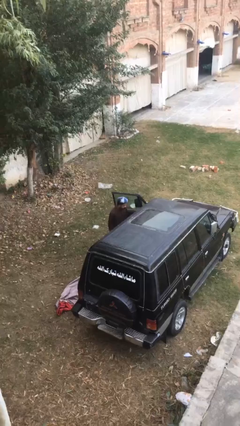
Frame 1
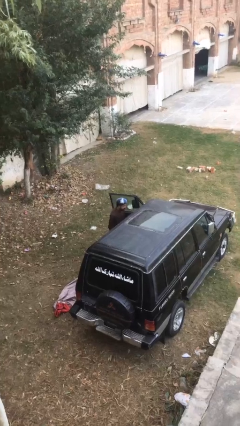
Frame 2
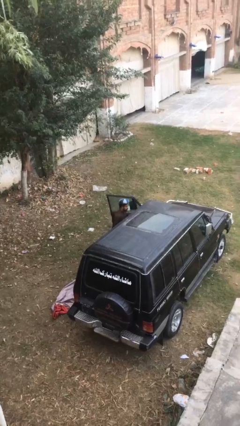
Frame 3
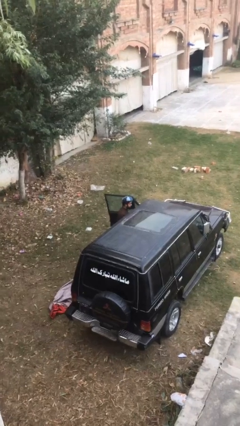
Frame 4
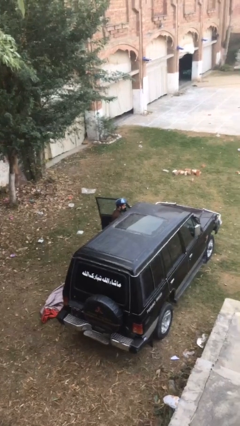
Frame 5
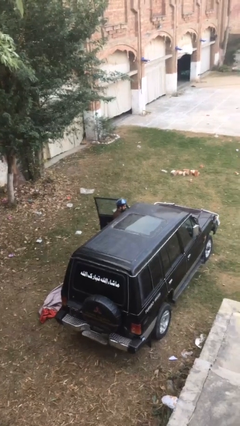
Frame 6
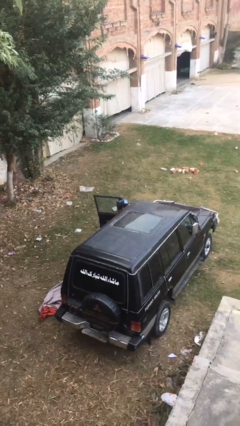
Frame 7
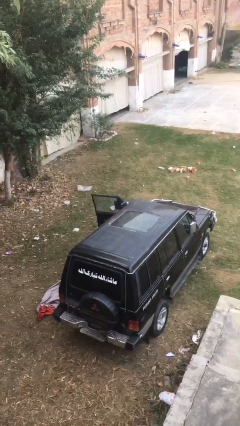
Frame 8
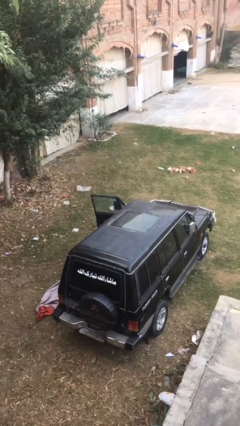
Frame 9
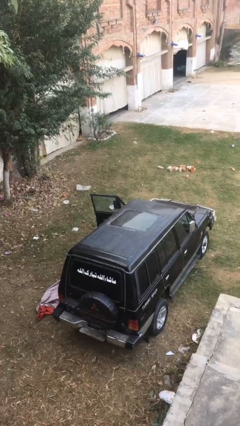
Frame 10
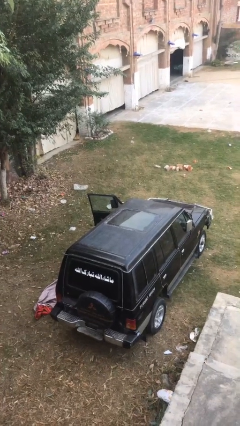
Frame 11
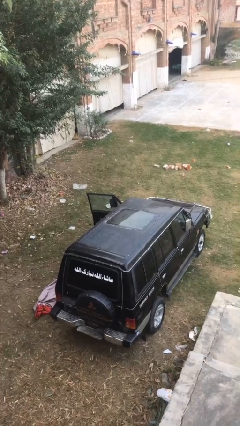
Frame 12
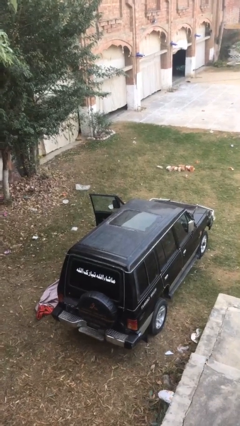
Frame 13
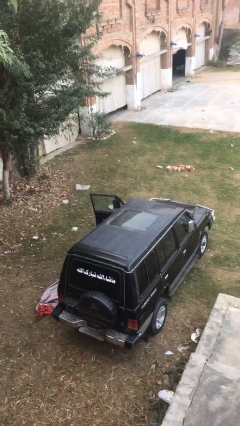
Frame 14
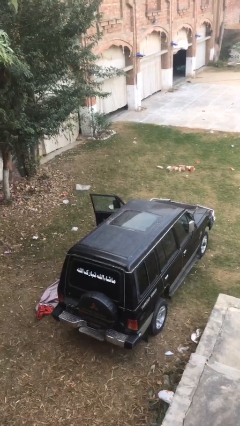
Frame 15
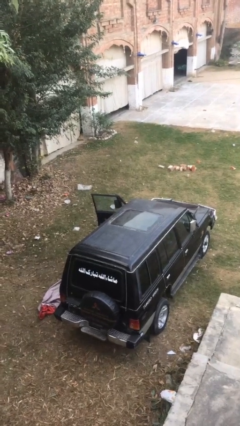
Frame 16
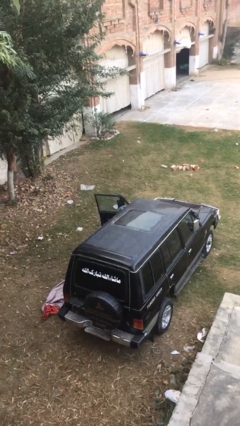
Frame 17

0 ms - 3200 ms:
person enters car

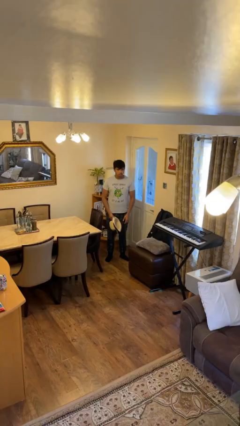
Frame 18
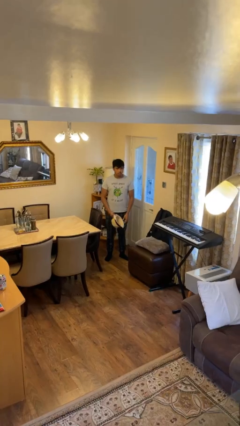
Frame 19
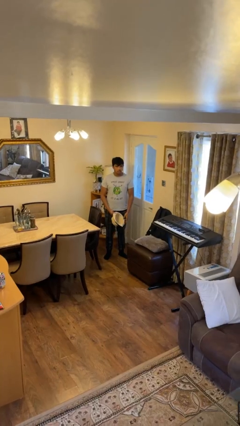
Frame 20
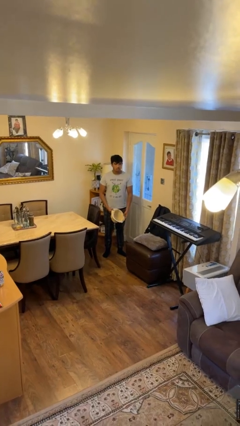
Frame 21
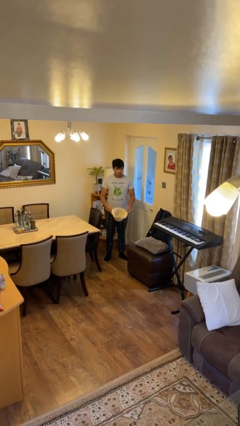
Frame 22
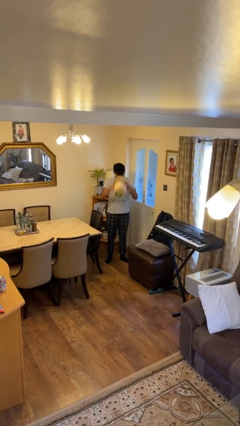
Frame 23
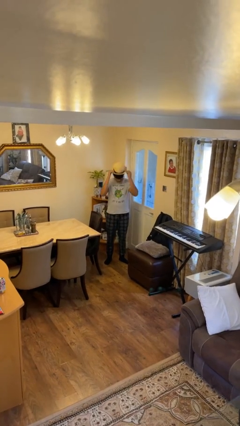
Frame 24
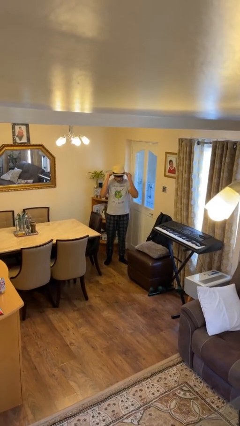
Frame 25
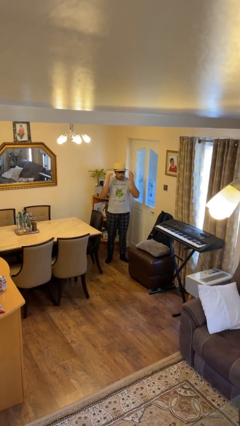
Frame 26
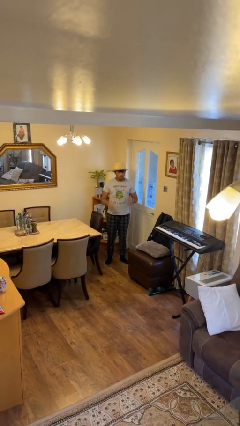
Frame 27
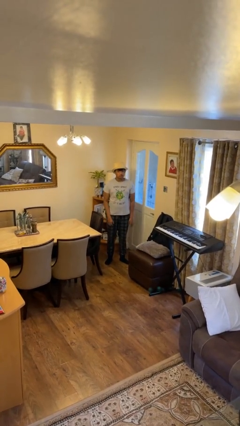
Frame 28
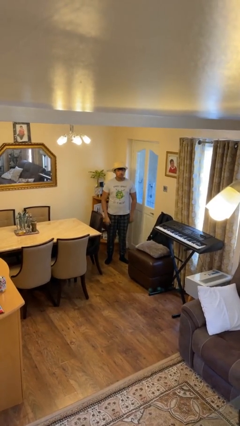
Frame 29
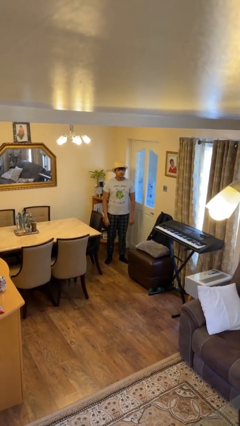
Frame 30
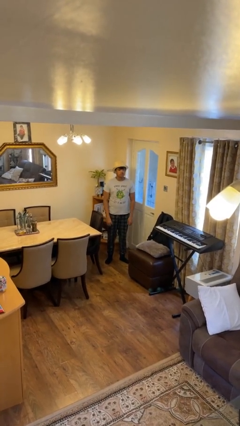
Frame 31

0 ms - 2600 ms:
person puts on hat

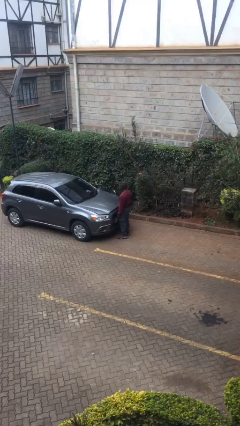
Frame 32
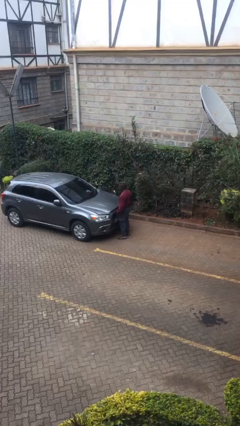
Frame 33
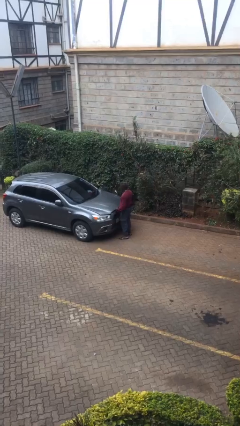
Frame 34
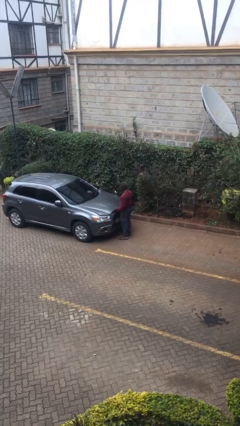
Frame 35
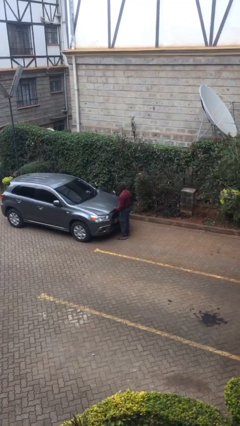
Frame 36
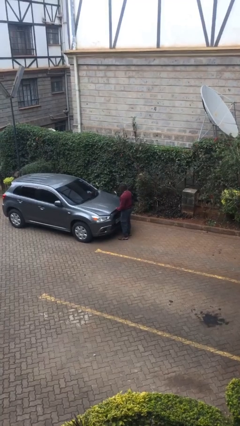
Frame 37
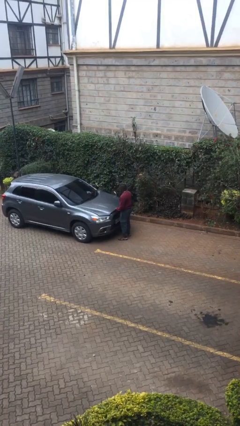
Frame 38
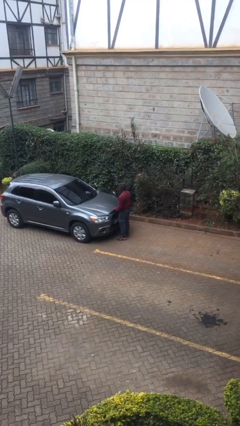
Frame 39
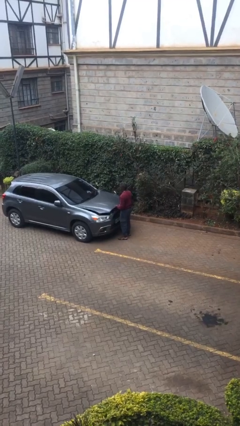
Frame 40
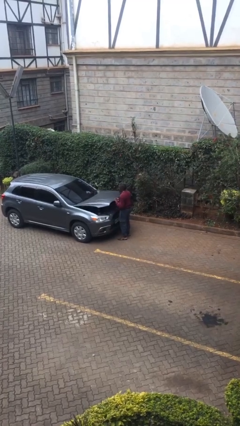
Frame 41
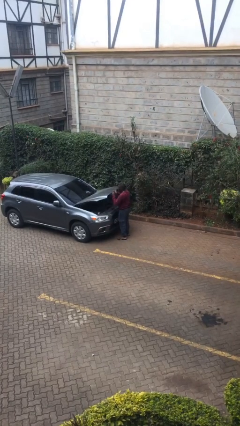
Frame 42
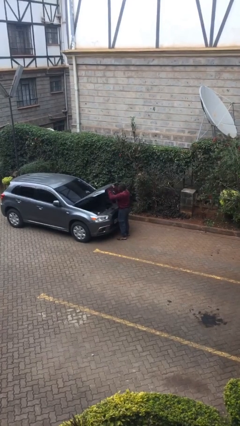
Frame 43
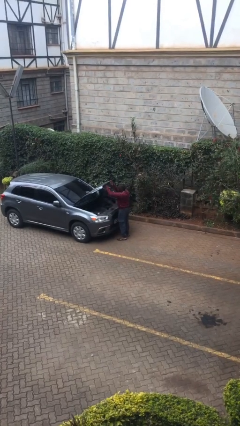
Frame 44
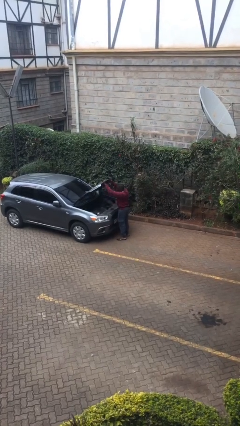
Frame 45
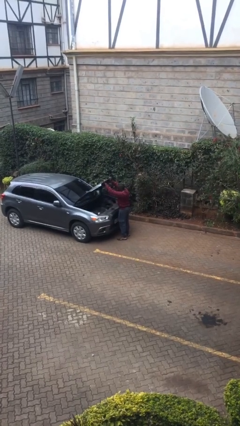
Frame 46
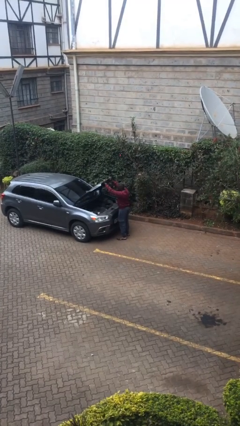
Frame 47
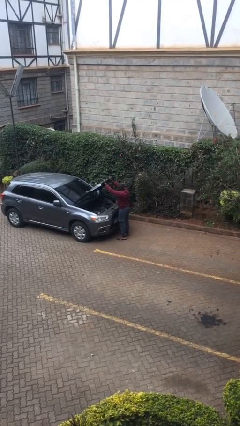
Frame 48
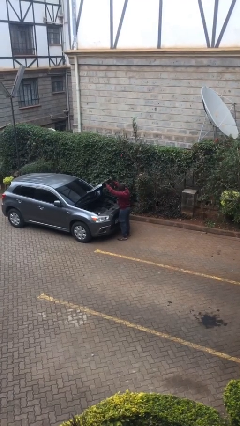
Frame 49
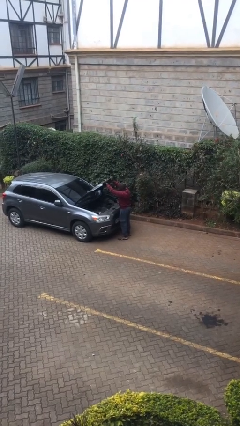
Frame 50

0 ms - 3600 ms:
person opens car hood

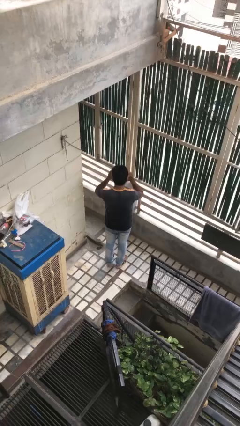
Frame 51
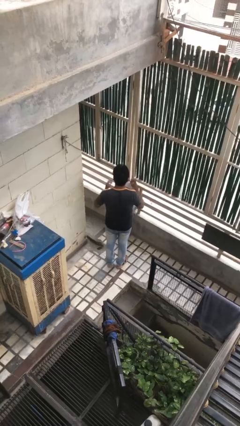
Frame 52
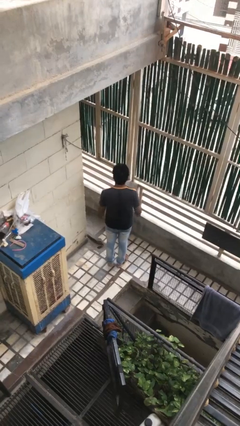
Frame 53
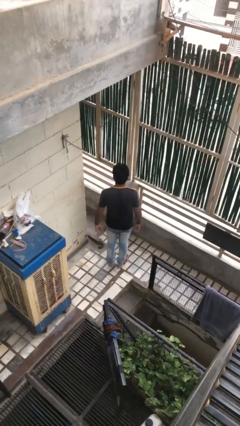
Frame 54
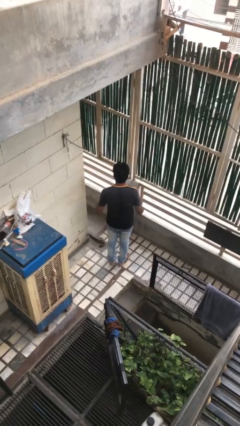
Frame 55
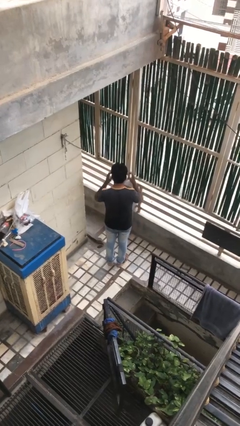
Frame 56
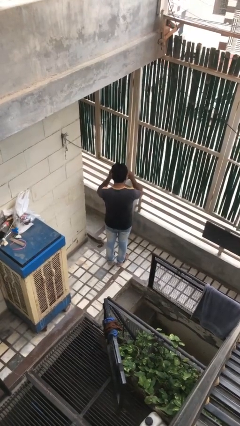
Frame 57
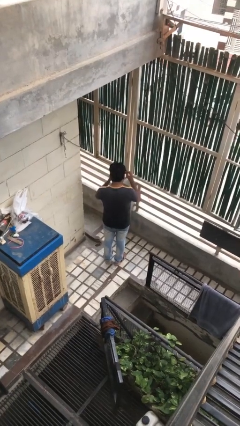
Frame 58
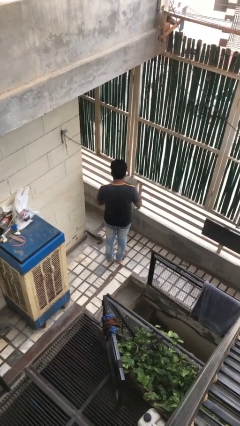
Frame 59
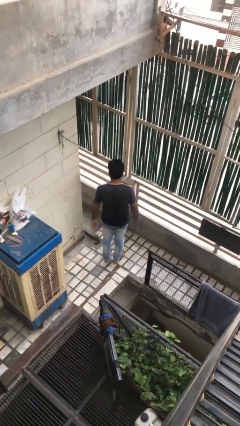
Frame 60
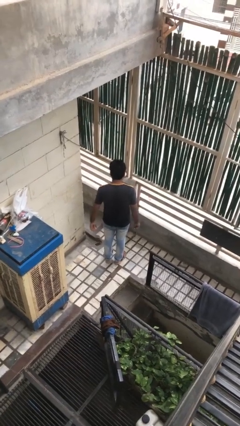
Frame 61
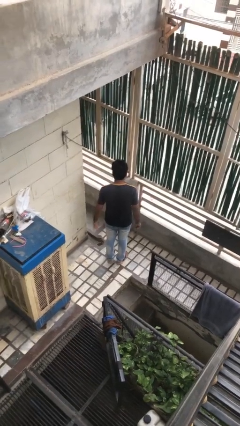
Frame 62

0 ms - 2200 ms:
person takes off glasses

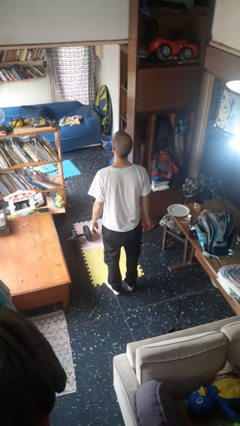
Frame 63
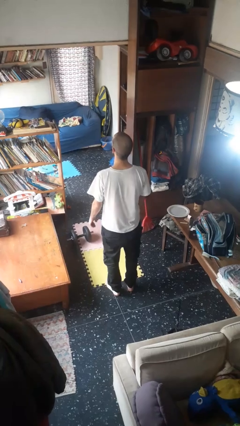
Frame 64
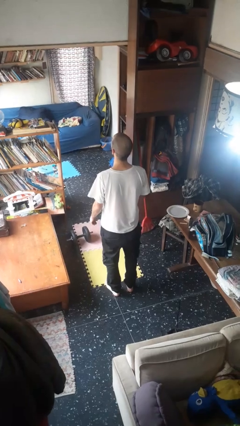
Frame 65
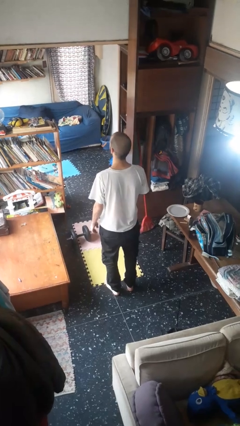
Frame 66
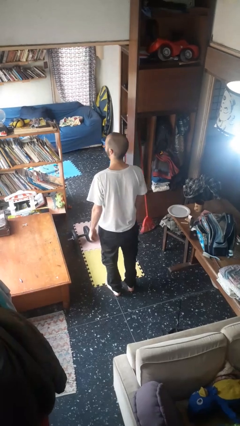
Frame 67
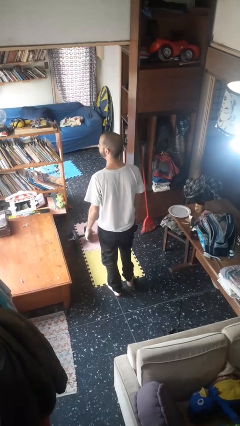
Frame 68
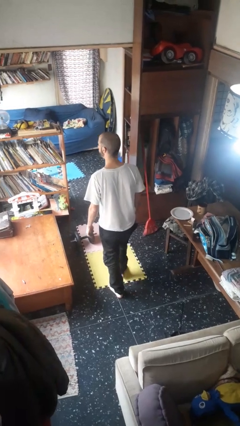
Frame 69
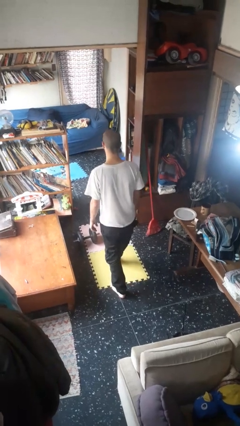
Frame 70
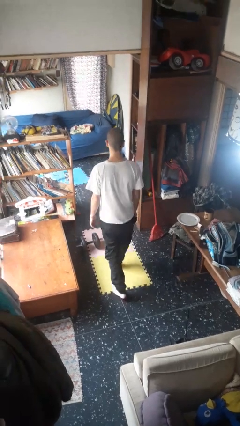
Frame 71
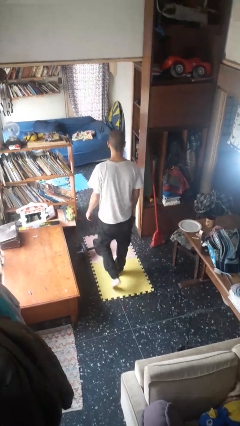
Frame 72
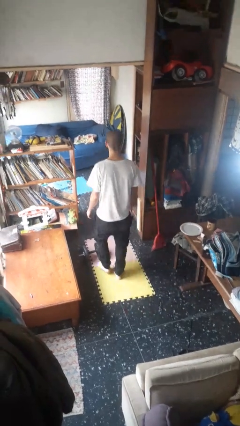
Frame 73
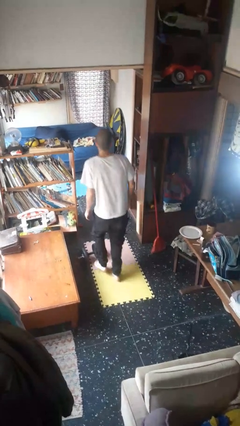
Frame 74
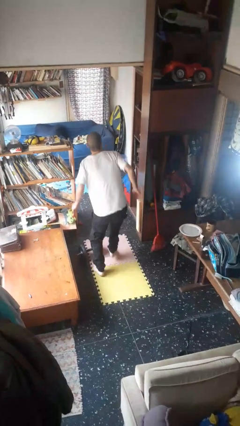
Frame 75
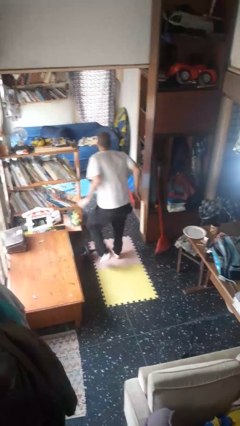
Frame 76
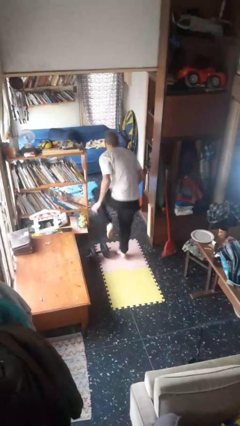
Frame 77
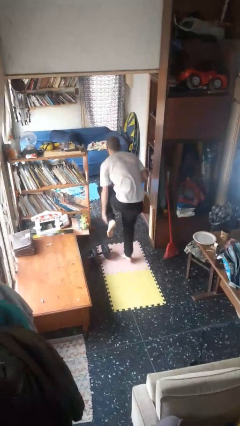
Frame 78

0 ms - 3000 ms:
person stubs toe

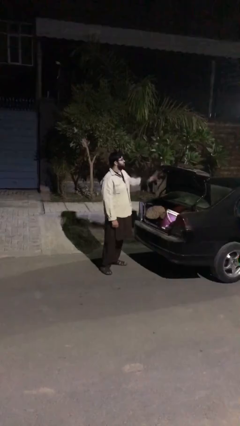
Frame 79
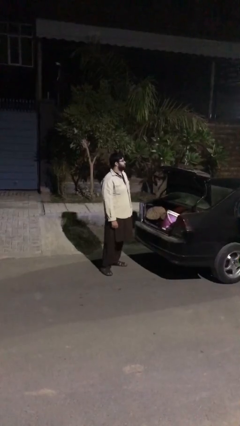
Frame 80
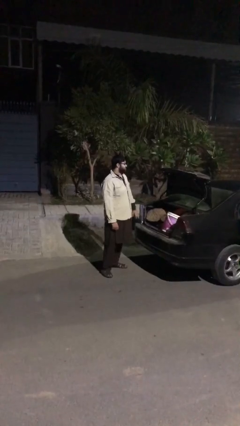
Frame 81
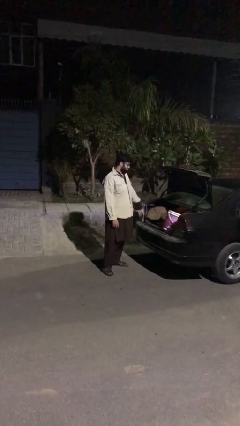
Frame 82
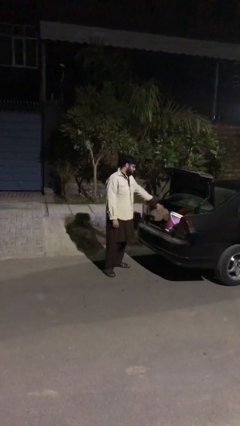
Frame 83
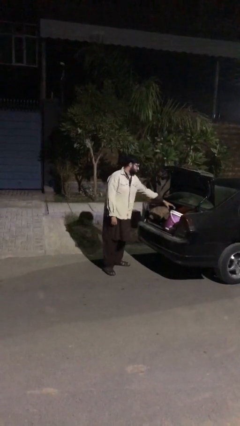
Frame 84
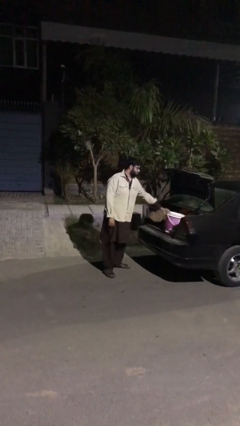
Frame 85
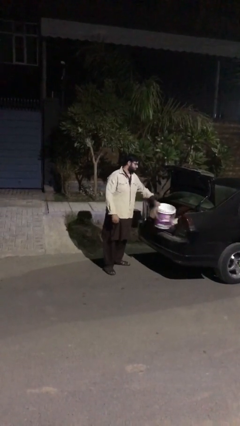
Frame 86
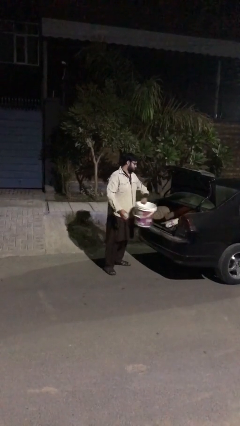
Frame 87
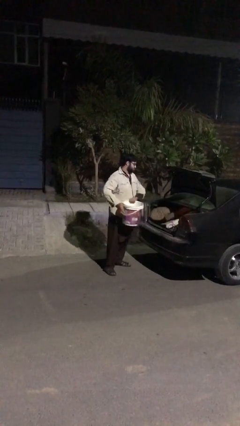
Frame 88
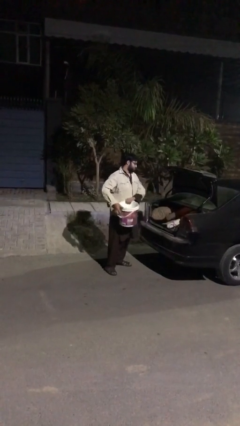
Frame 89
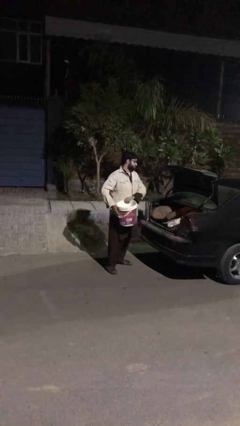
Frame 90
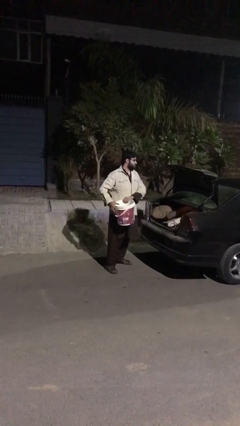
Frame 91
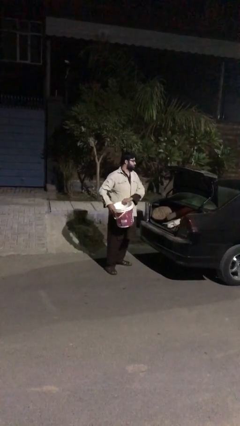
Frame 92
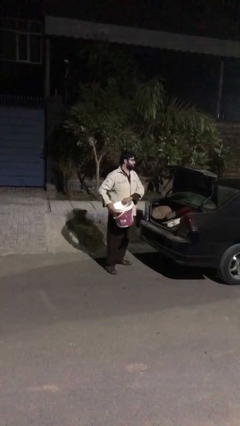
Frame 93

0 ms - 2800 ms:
person unloads car
